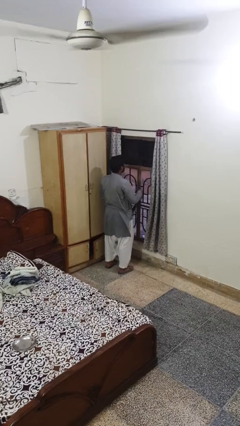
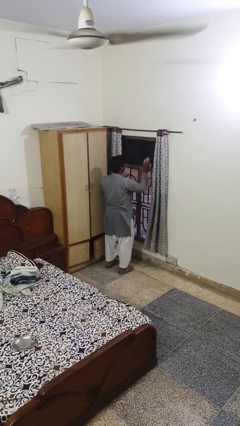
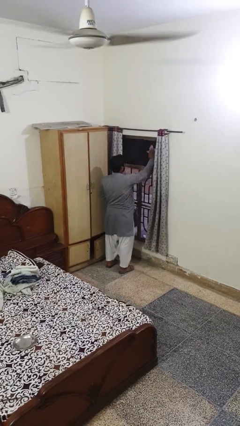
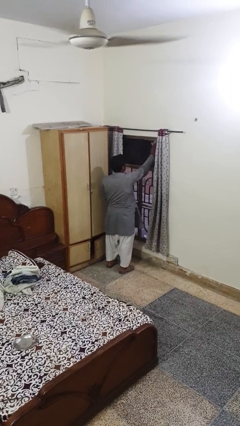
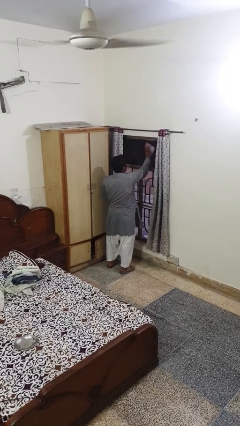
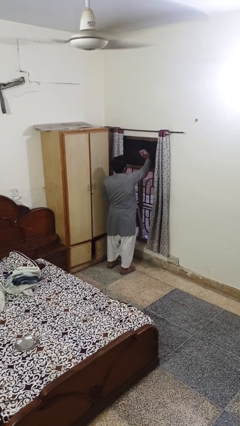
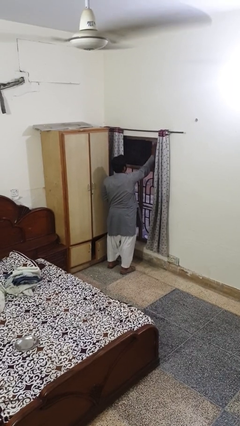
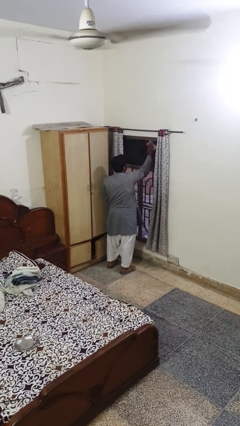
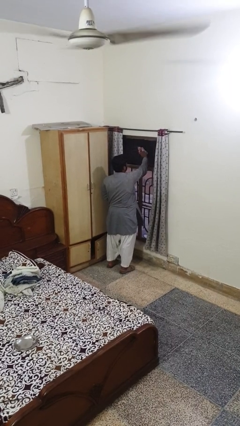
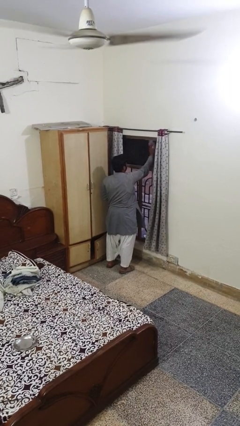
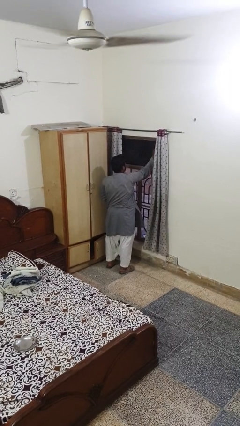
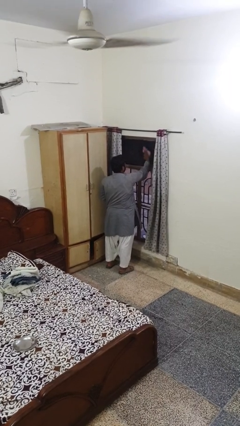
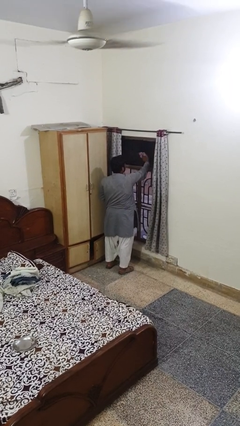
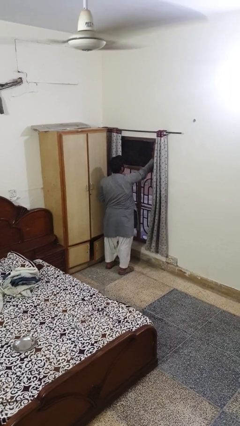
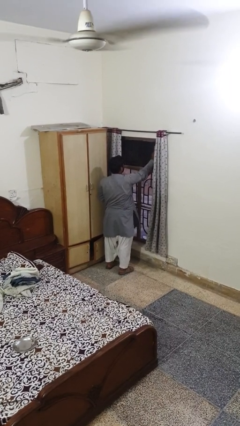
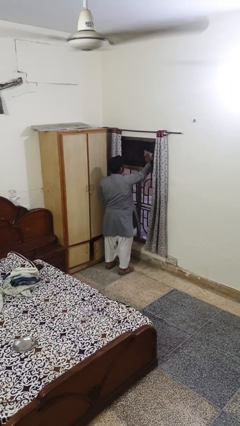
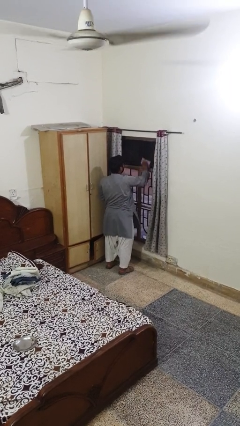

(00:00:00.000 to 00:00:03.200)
person washes window

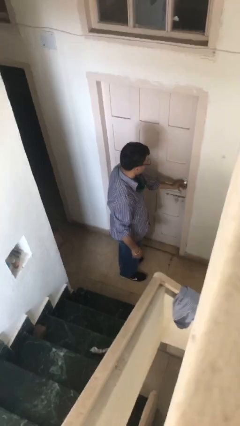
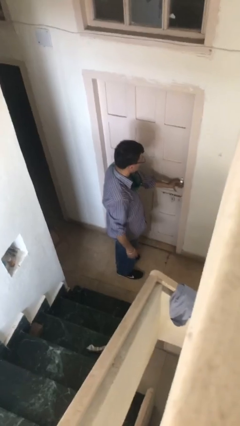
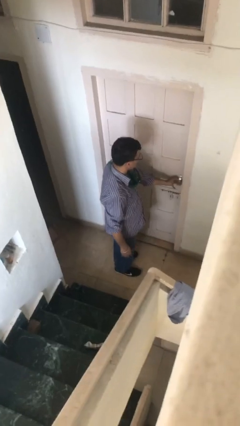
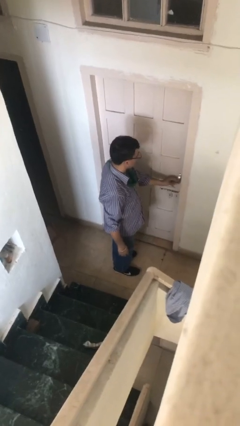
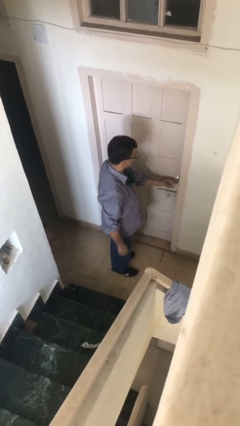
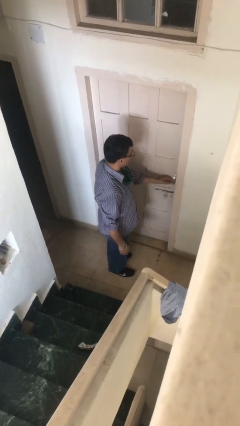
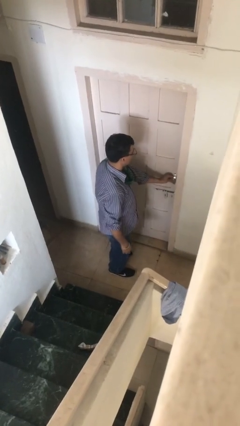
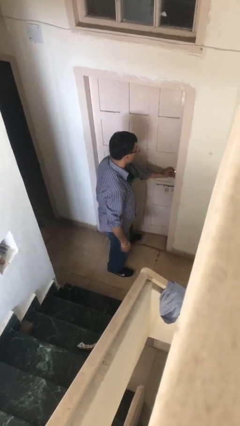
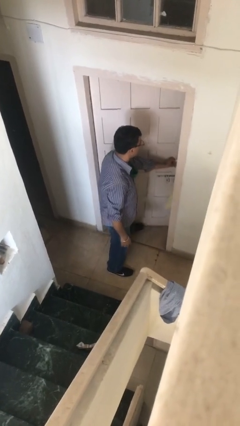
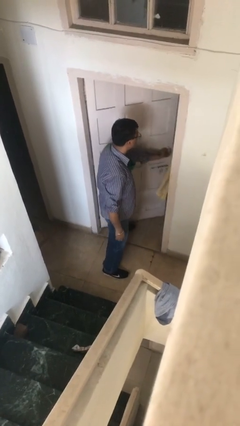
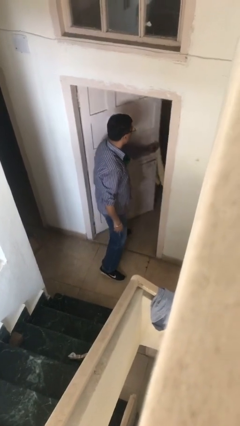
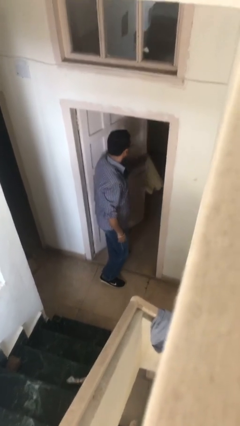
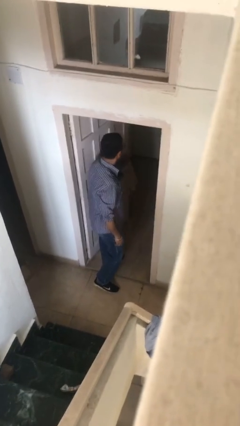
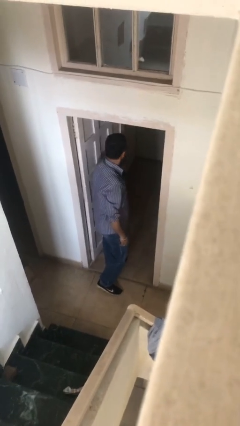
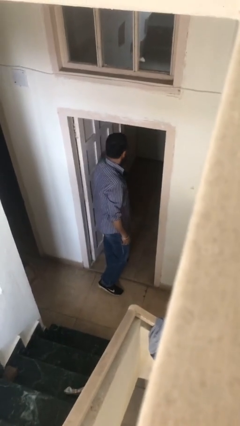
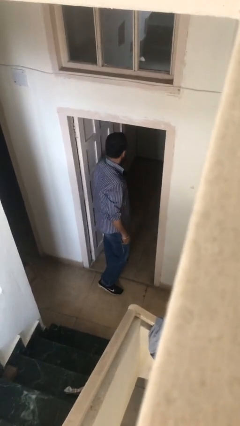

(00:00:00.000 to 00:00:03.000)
person opens facility door

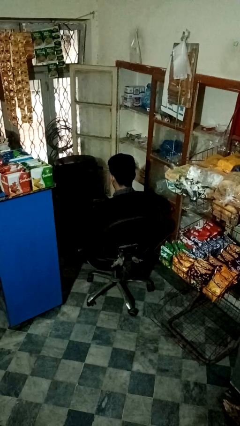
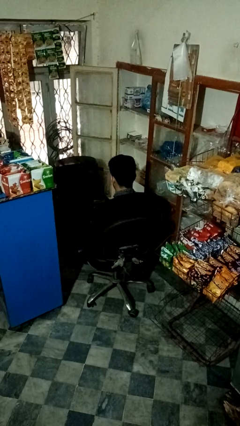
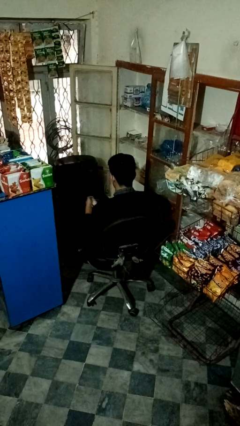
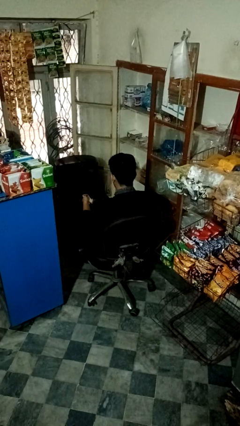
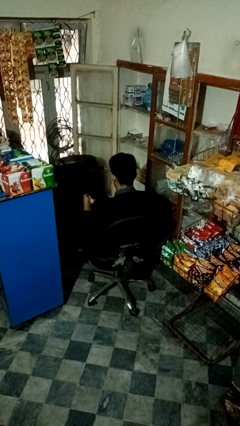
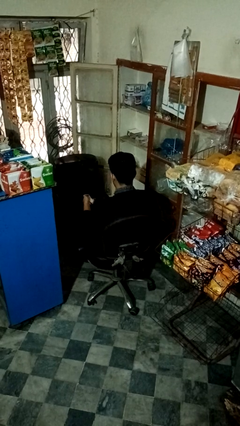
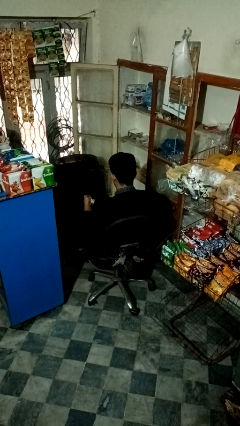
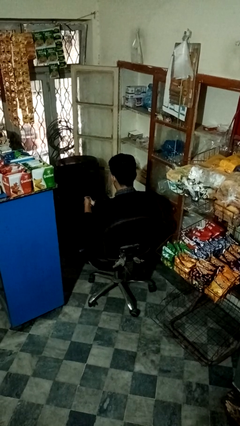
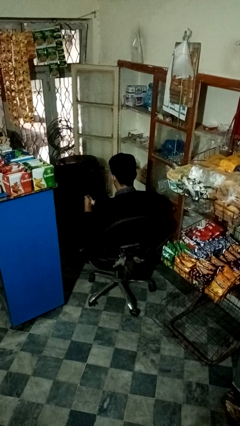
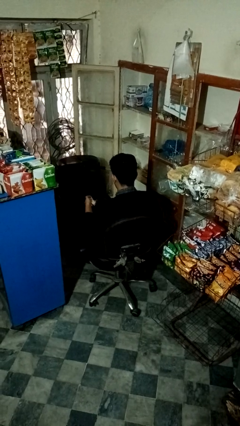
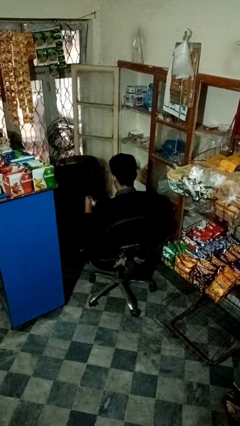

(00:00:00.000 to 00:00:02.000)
person uses television remote

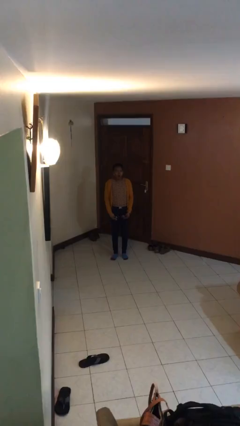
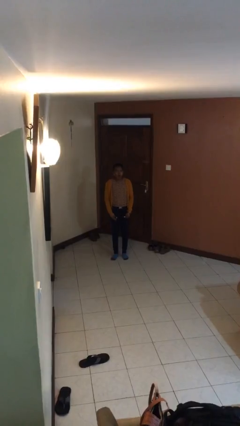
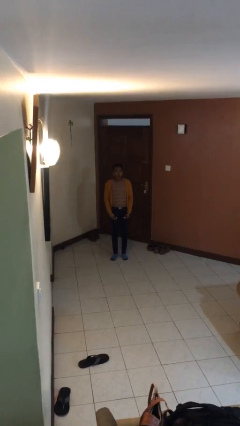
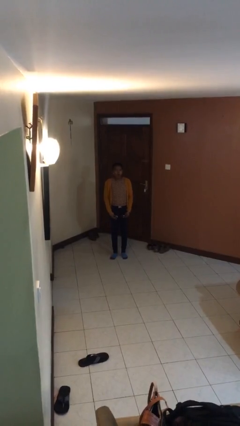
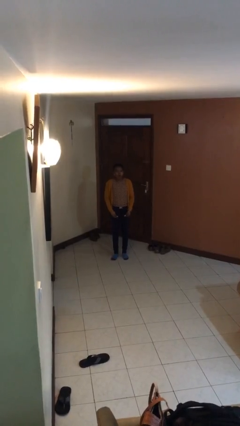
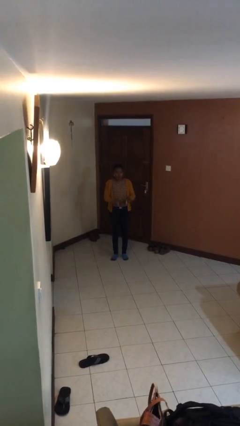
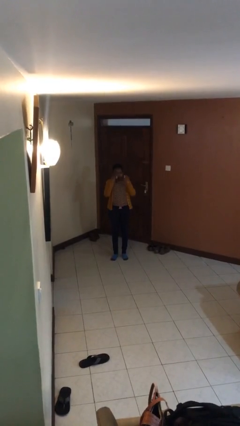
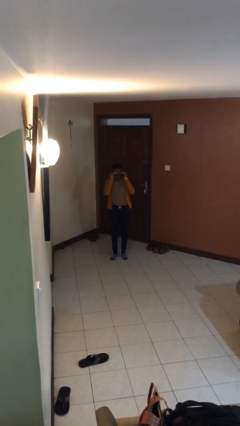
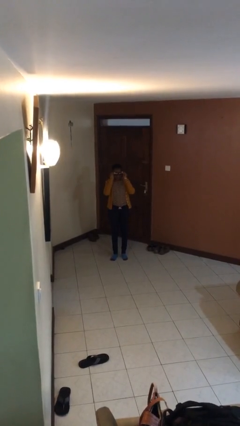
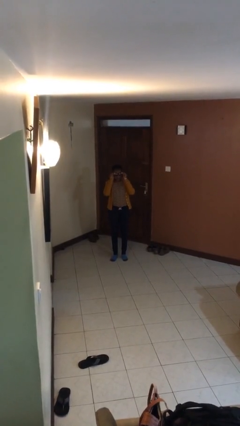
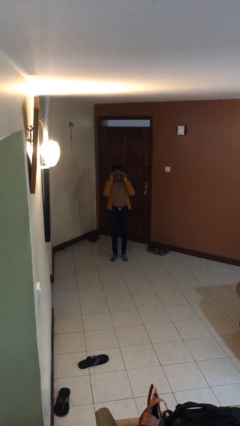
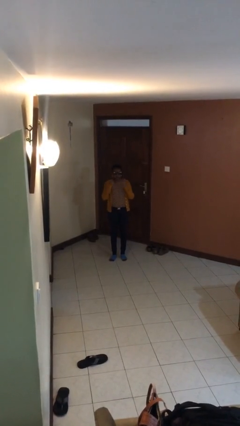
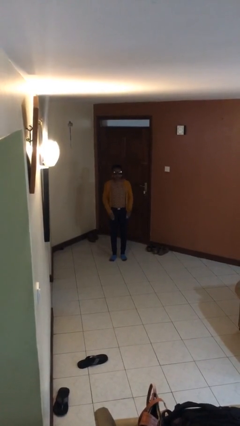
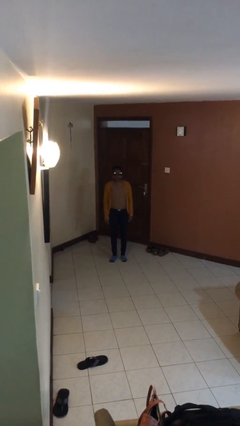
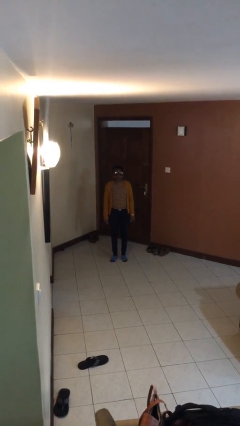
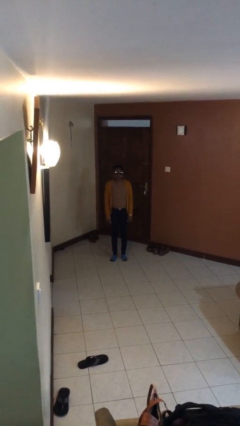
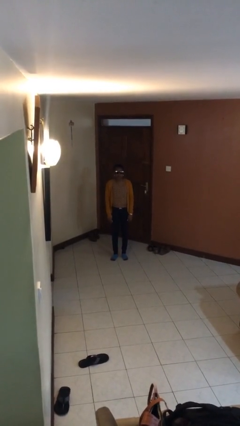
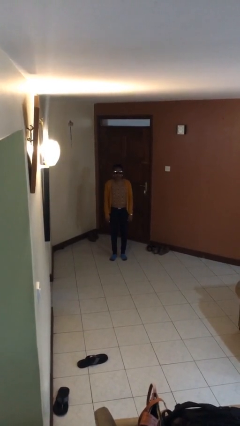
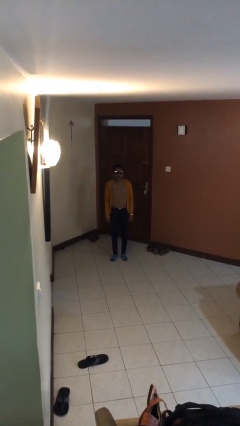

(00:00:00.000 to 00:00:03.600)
person puts on sunglasses

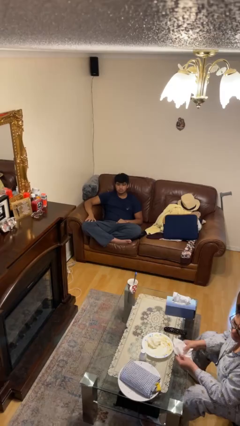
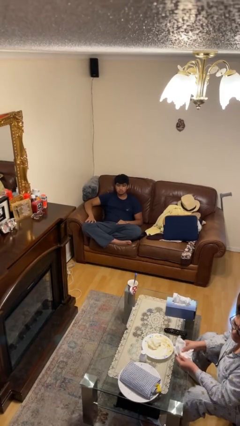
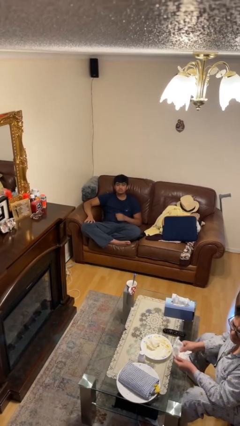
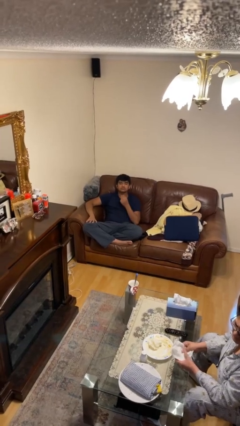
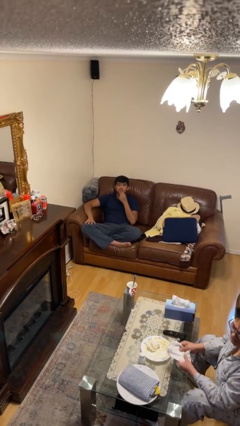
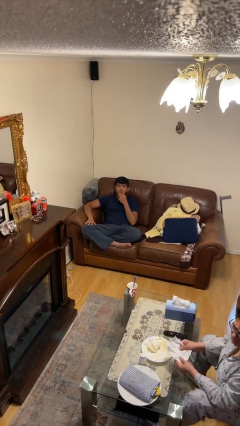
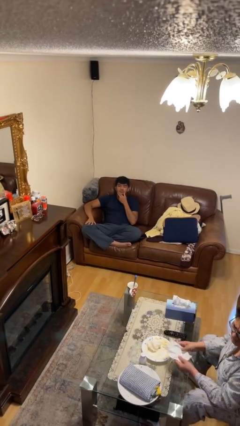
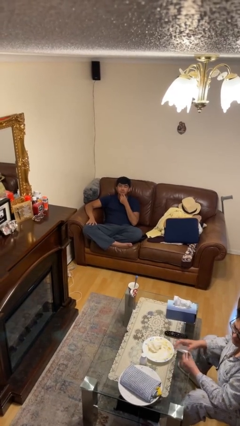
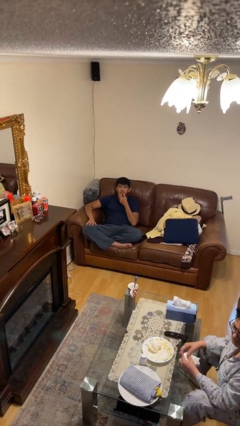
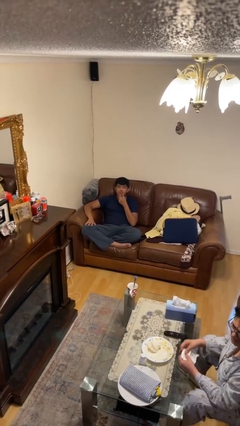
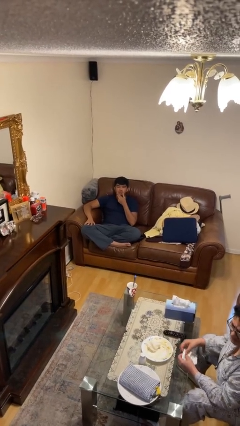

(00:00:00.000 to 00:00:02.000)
person strokes chin

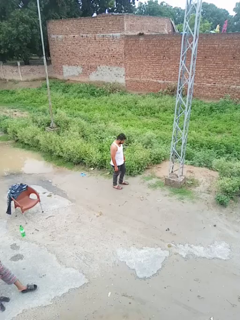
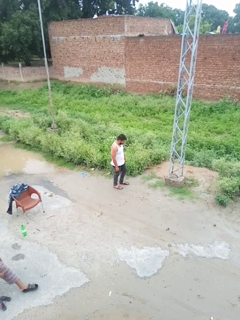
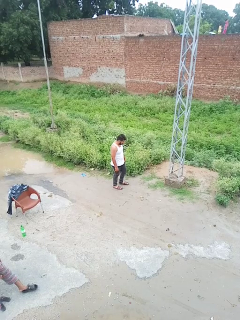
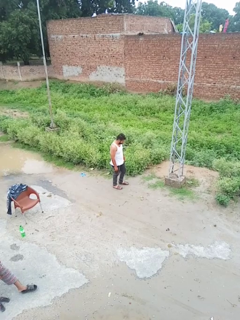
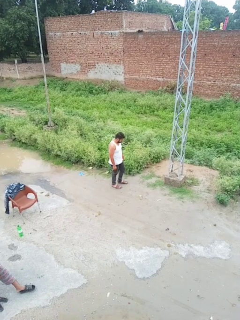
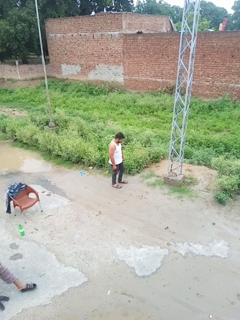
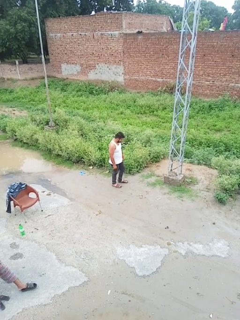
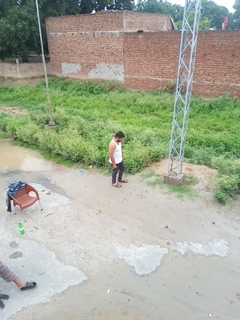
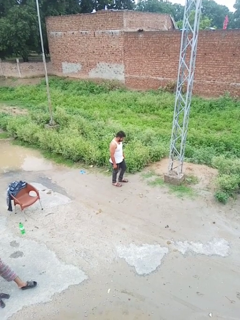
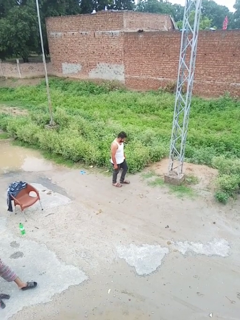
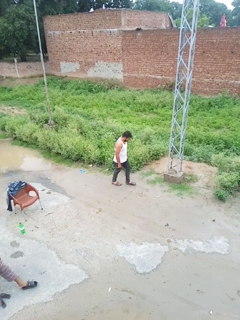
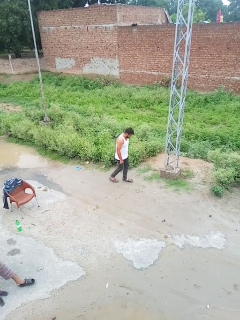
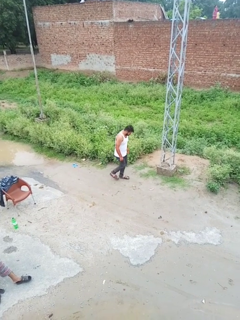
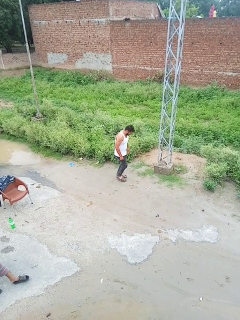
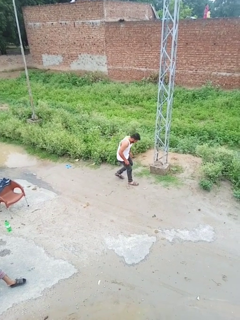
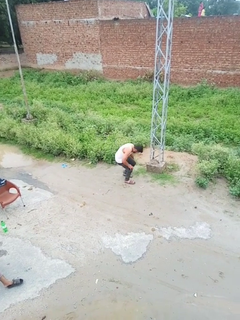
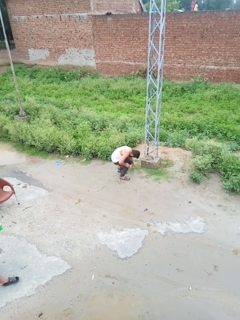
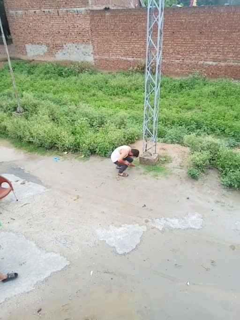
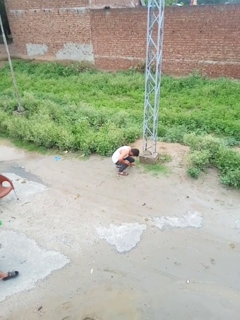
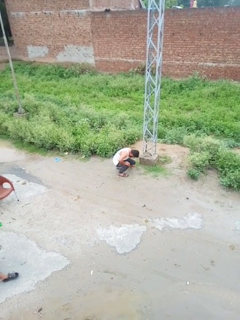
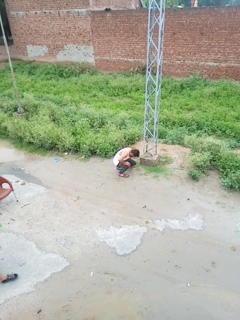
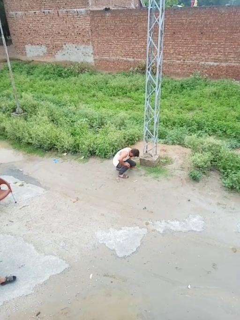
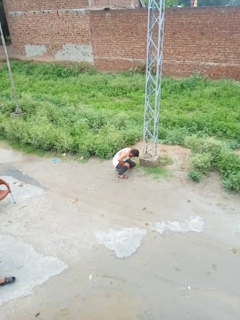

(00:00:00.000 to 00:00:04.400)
person trips on object on floor

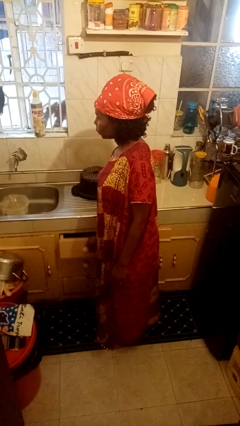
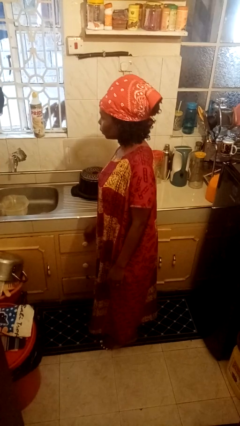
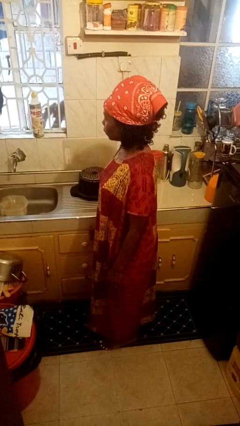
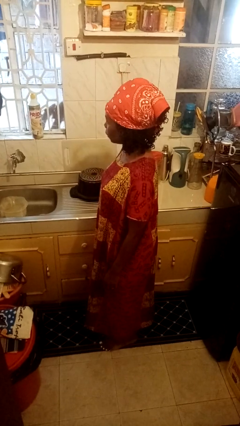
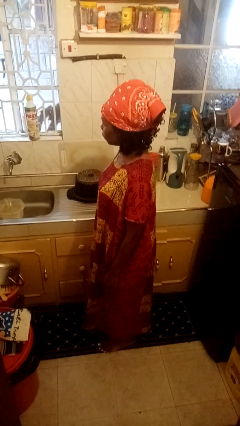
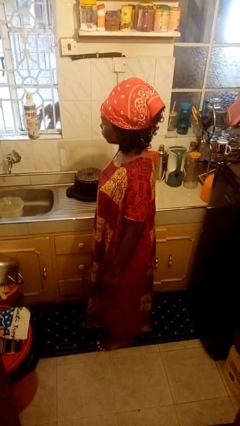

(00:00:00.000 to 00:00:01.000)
person closes kitchen drawer
